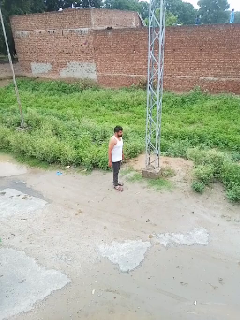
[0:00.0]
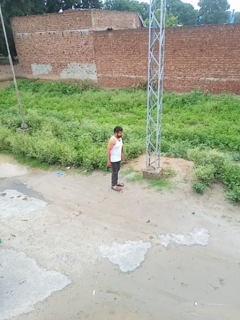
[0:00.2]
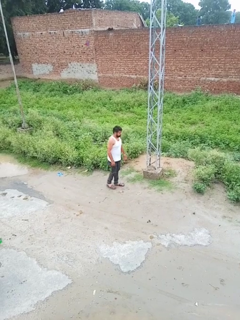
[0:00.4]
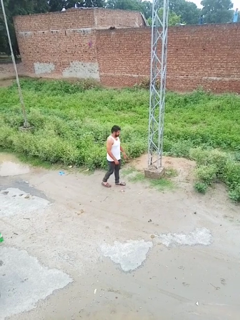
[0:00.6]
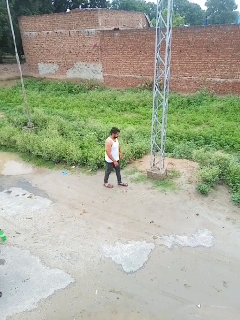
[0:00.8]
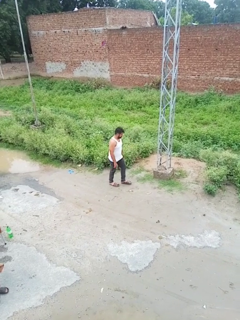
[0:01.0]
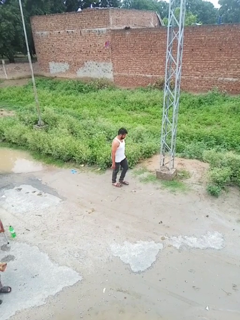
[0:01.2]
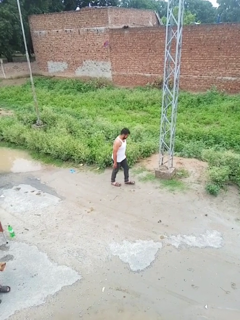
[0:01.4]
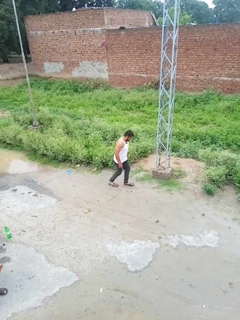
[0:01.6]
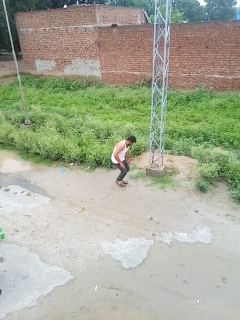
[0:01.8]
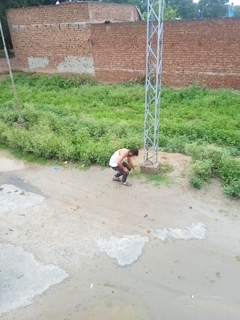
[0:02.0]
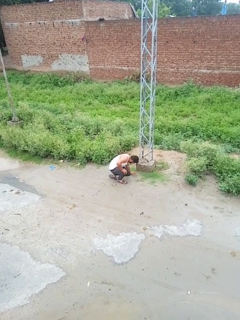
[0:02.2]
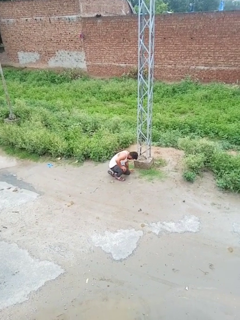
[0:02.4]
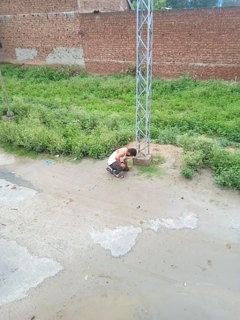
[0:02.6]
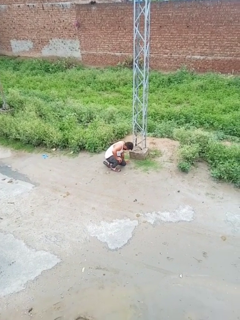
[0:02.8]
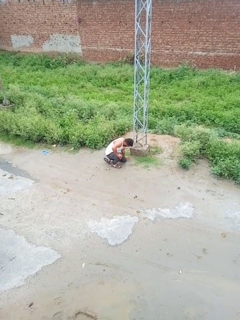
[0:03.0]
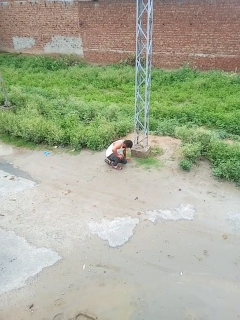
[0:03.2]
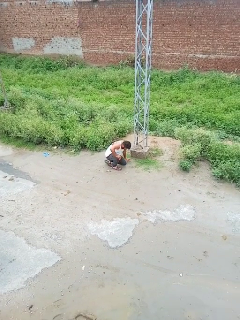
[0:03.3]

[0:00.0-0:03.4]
person trips on object on floor

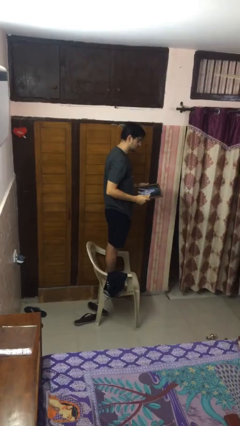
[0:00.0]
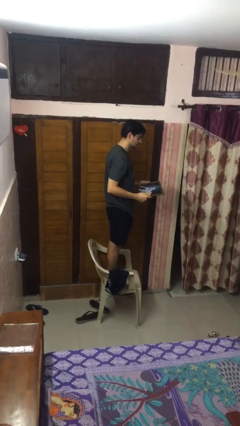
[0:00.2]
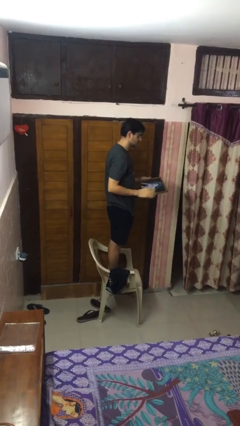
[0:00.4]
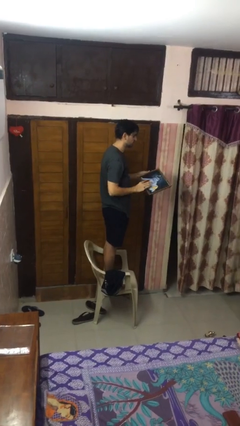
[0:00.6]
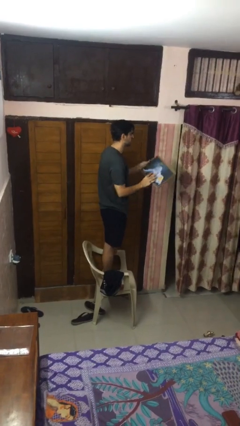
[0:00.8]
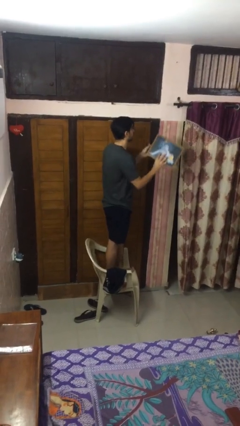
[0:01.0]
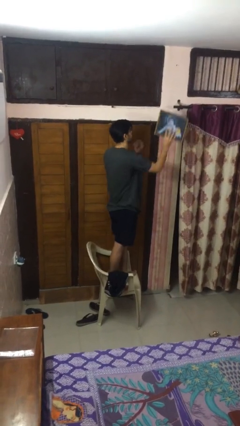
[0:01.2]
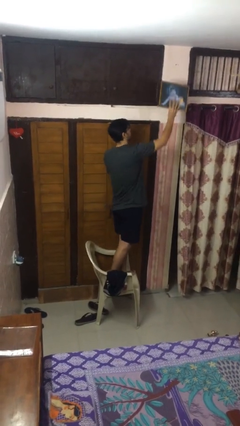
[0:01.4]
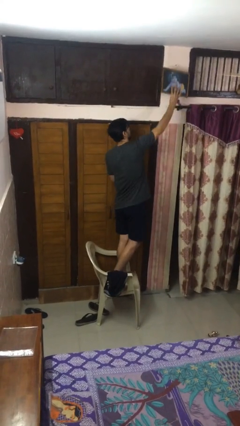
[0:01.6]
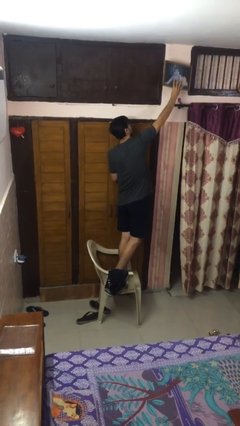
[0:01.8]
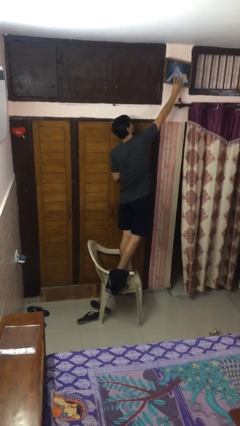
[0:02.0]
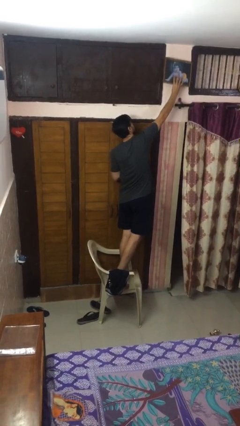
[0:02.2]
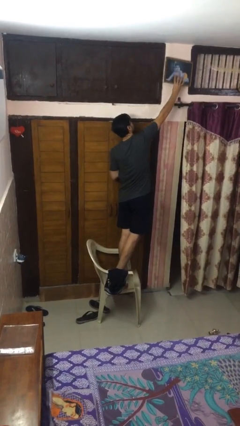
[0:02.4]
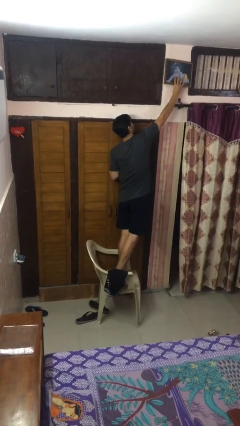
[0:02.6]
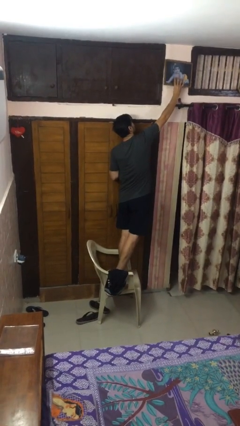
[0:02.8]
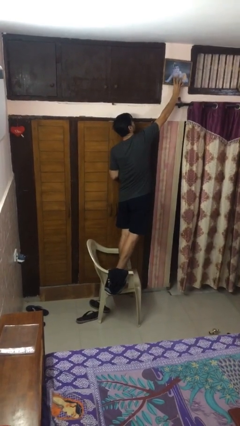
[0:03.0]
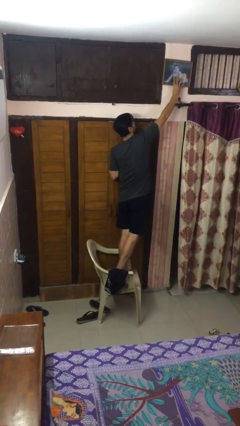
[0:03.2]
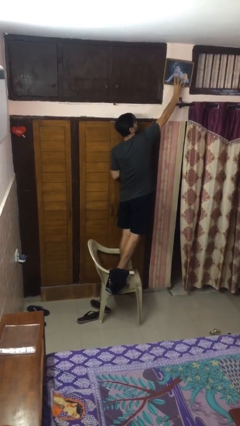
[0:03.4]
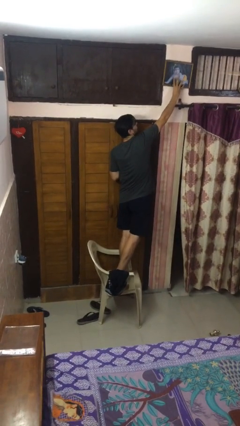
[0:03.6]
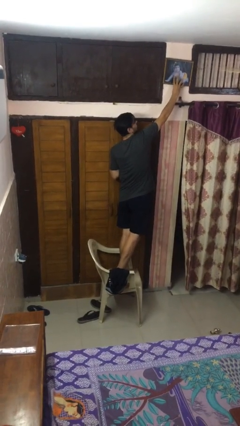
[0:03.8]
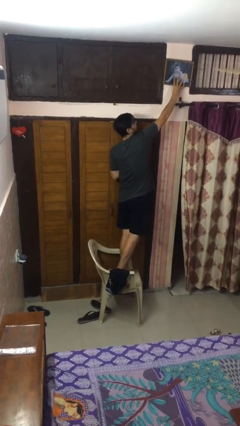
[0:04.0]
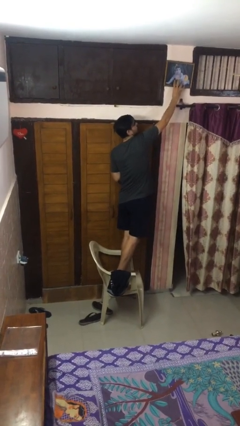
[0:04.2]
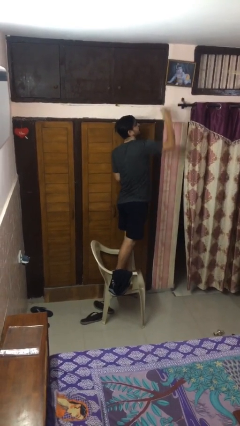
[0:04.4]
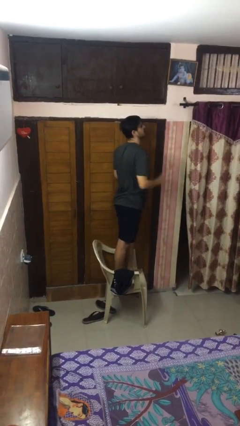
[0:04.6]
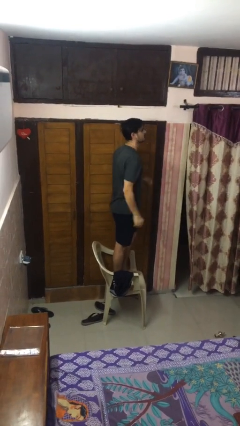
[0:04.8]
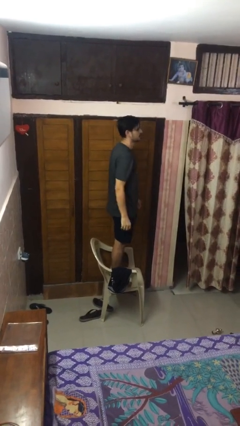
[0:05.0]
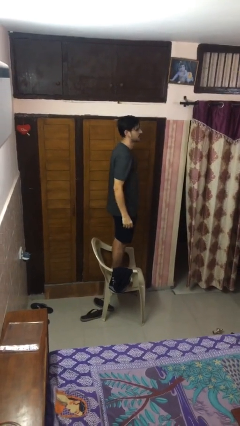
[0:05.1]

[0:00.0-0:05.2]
person puts up picture frame

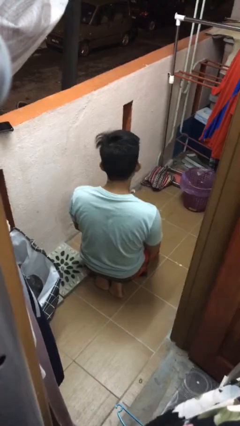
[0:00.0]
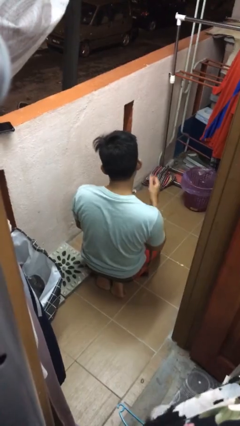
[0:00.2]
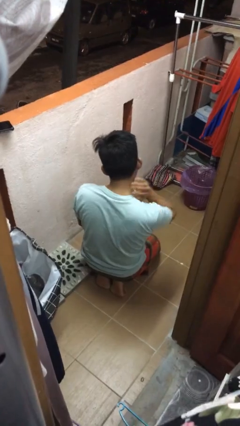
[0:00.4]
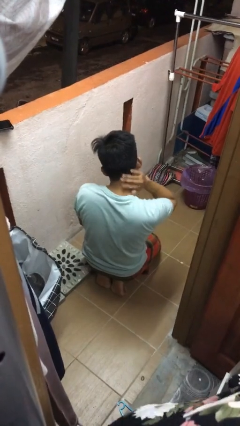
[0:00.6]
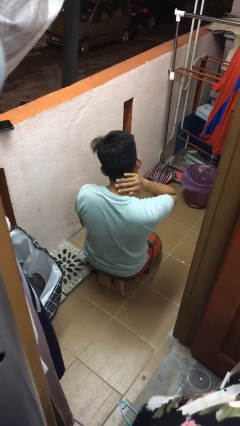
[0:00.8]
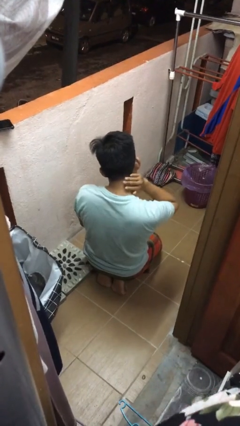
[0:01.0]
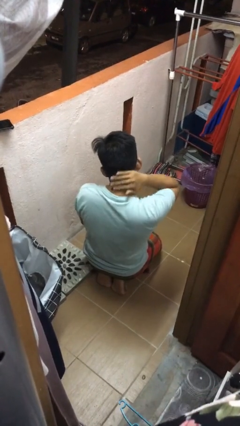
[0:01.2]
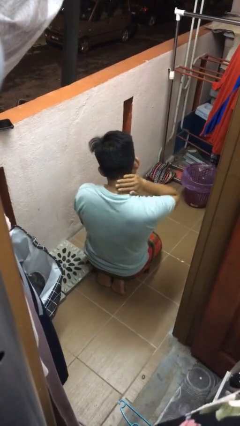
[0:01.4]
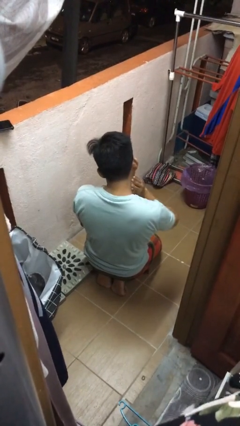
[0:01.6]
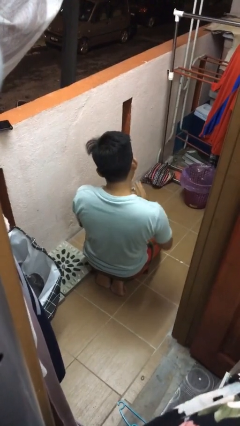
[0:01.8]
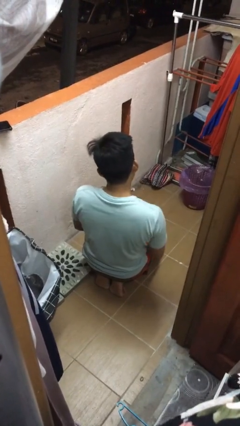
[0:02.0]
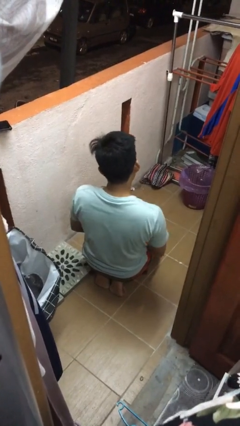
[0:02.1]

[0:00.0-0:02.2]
person rubs neck

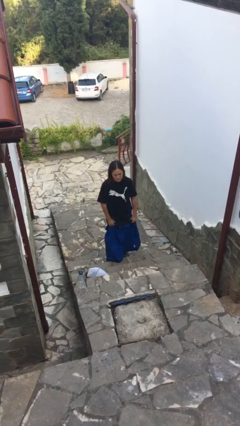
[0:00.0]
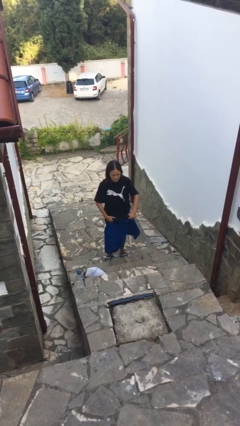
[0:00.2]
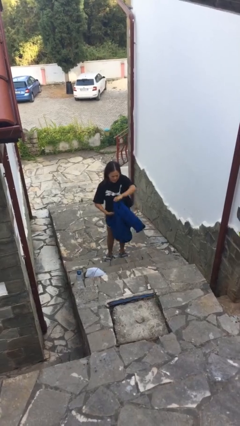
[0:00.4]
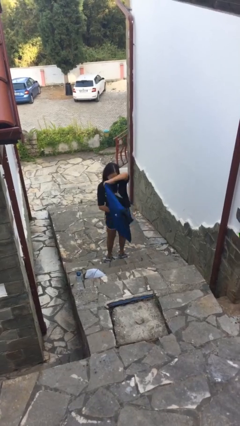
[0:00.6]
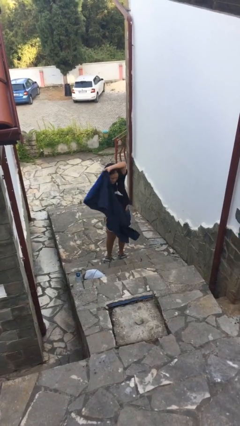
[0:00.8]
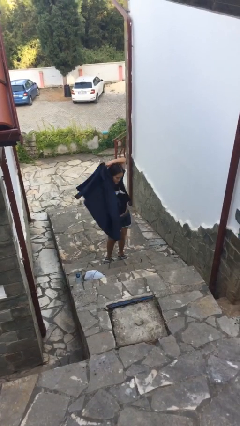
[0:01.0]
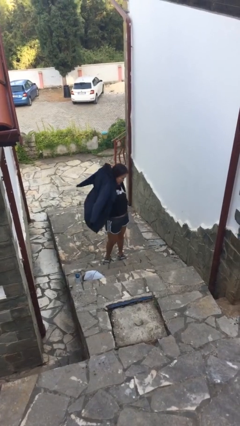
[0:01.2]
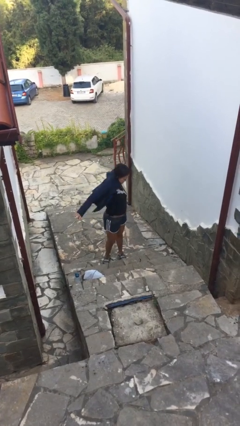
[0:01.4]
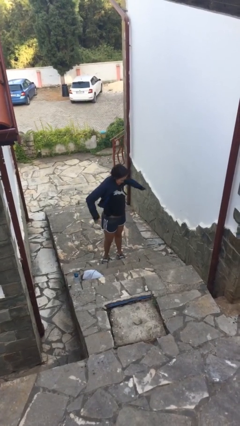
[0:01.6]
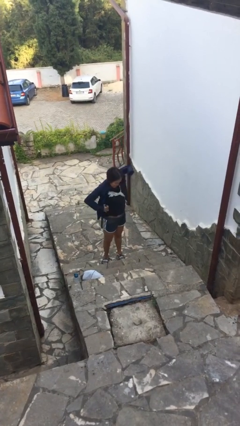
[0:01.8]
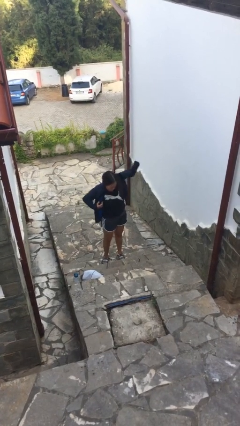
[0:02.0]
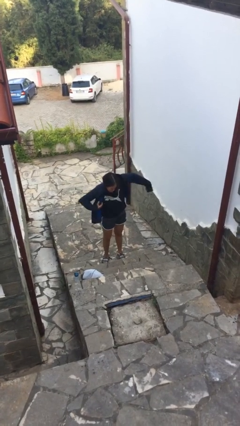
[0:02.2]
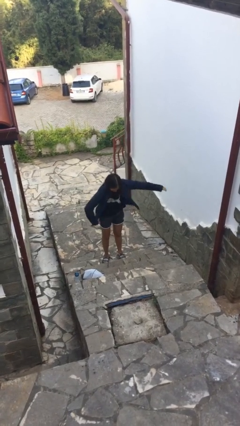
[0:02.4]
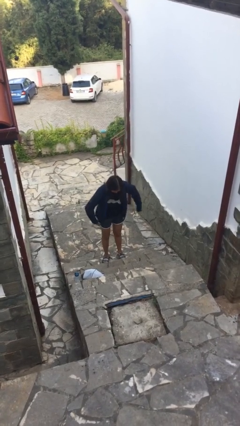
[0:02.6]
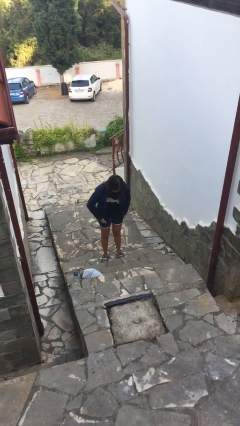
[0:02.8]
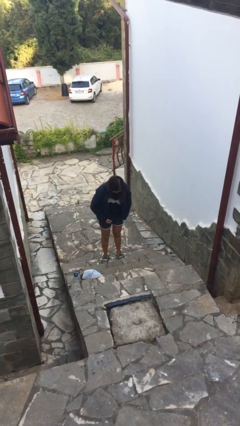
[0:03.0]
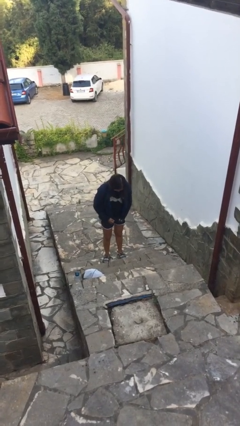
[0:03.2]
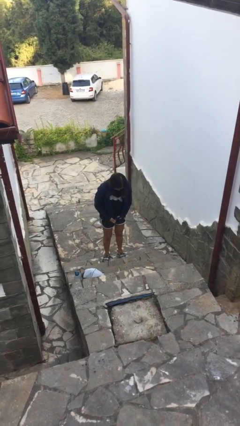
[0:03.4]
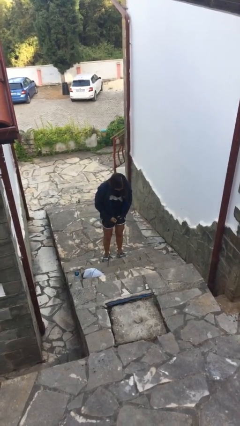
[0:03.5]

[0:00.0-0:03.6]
person puts on jacket

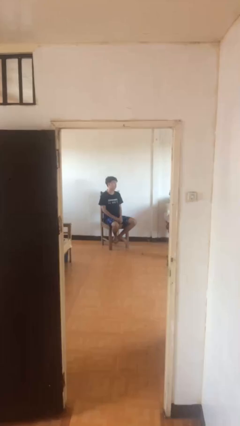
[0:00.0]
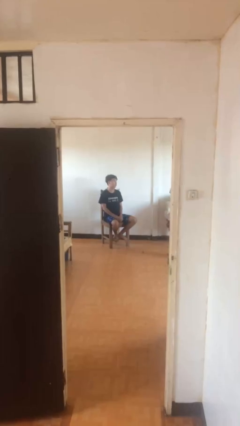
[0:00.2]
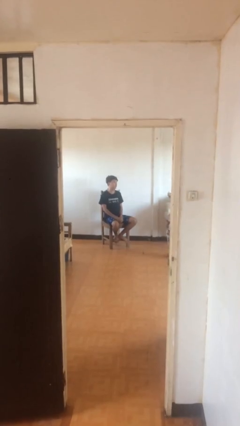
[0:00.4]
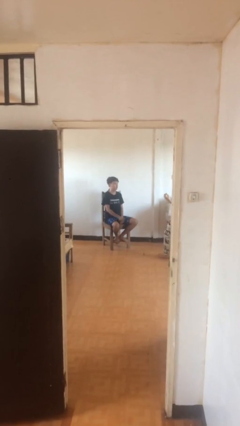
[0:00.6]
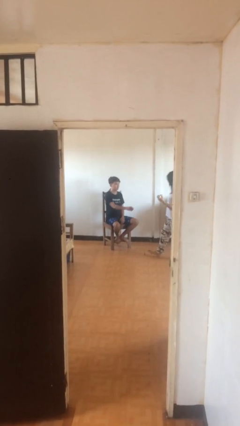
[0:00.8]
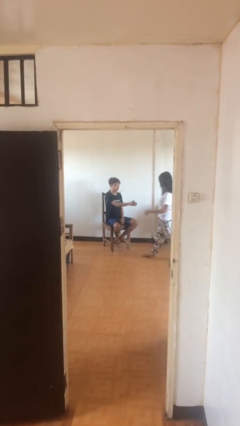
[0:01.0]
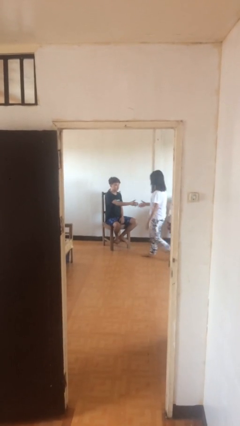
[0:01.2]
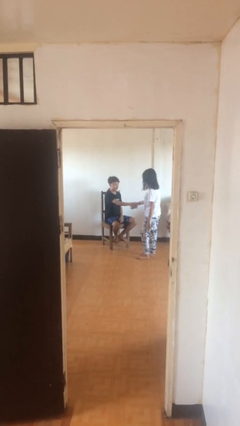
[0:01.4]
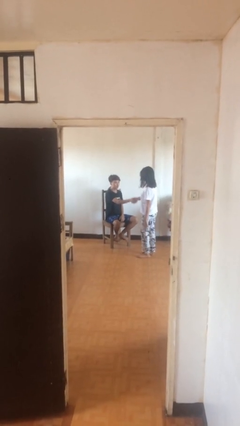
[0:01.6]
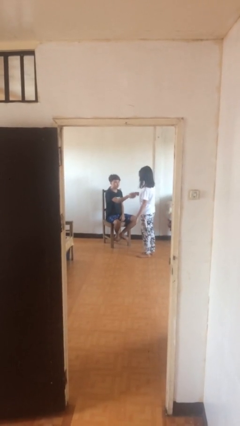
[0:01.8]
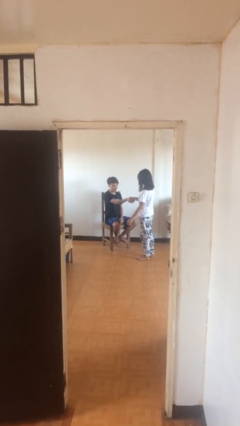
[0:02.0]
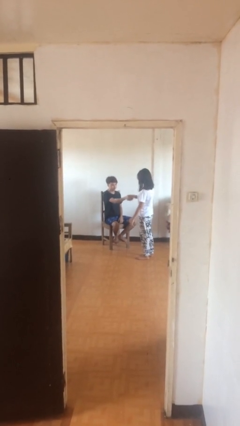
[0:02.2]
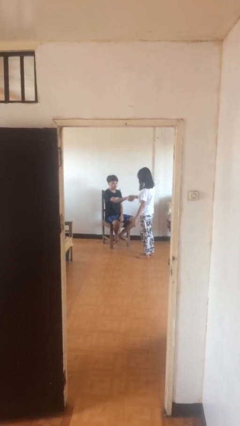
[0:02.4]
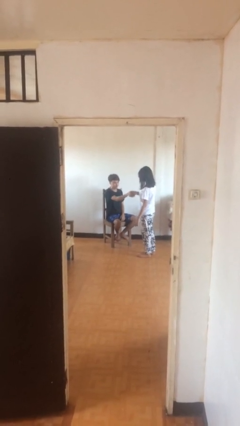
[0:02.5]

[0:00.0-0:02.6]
person shakes hand

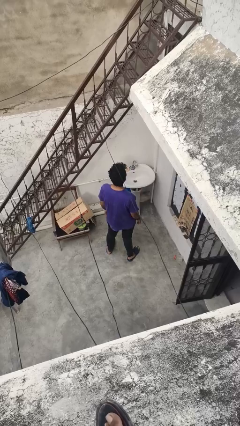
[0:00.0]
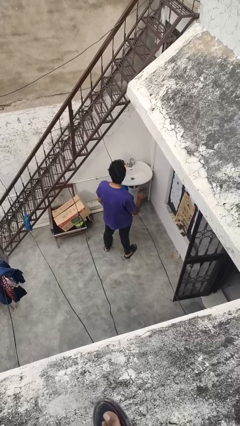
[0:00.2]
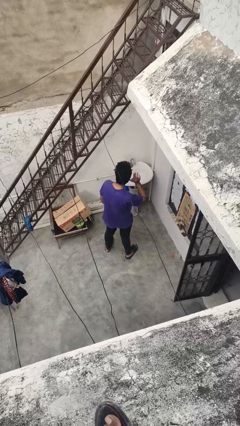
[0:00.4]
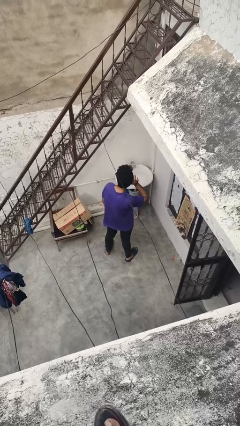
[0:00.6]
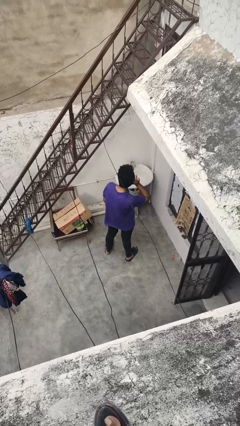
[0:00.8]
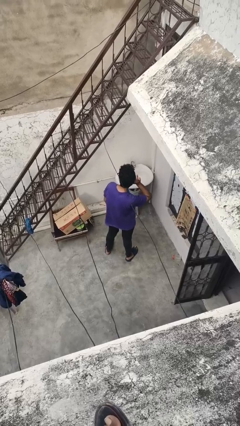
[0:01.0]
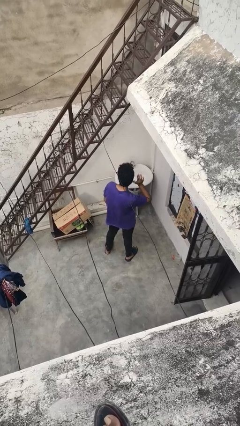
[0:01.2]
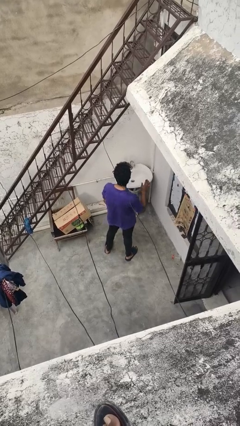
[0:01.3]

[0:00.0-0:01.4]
person gestures listen closely
